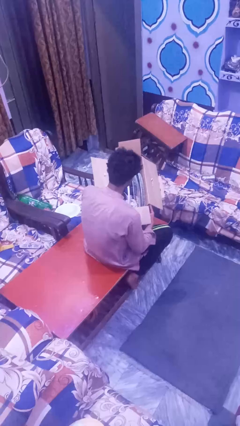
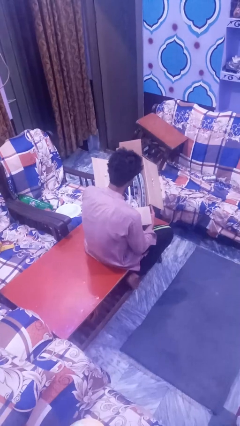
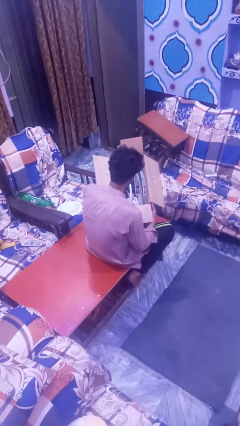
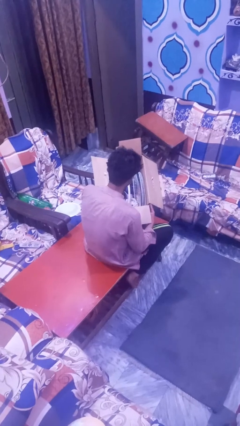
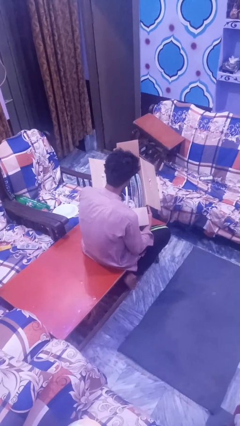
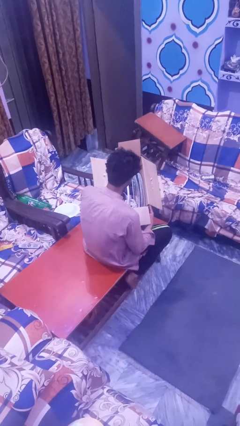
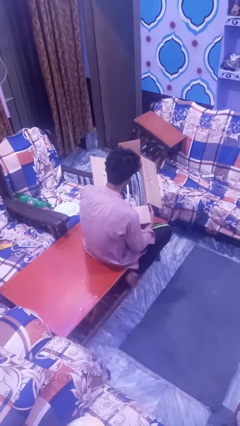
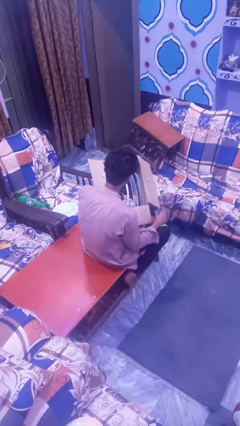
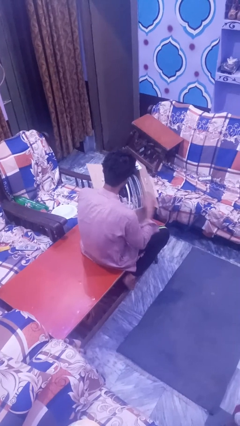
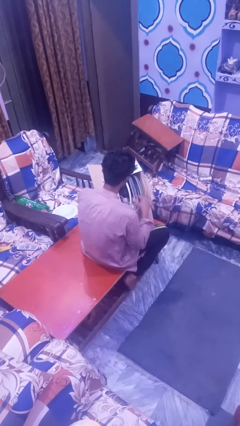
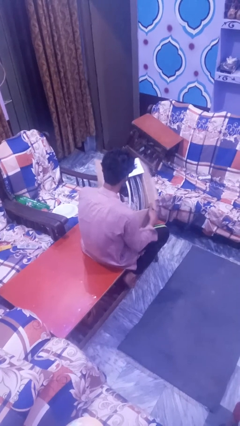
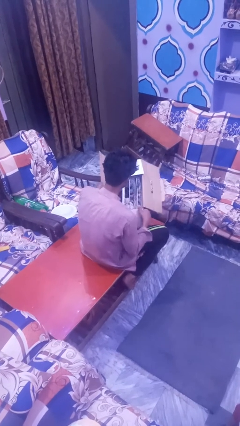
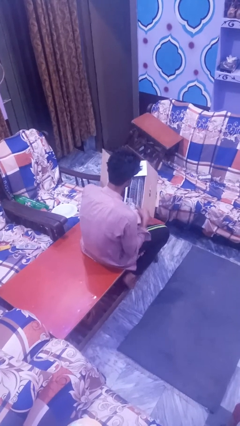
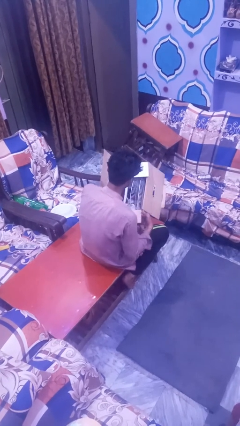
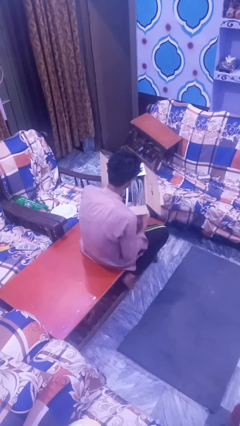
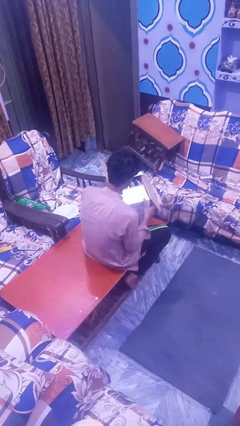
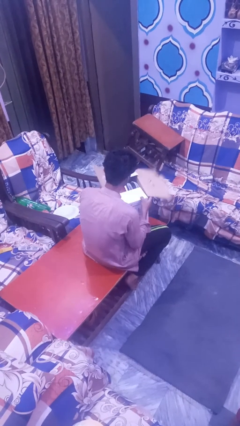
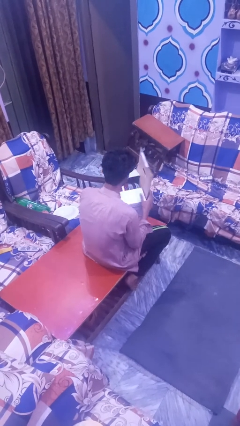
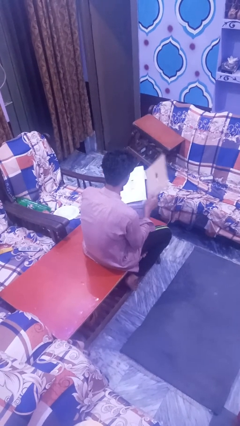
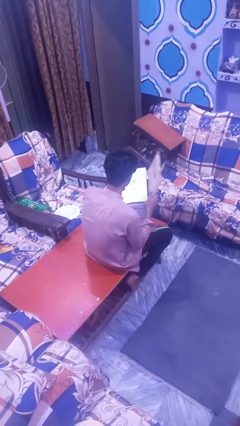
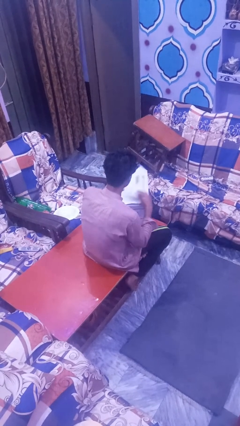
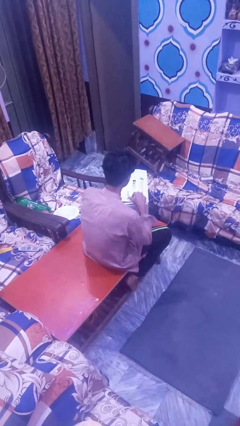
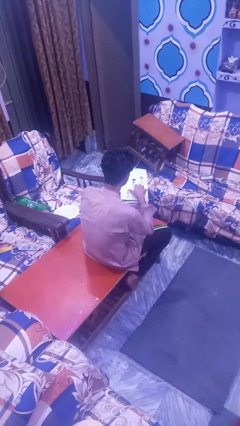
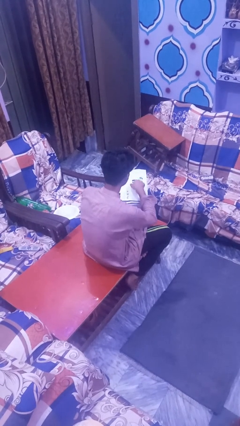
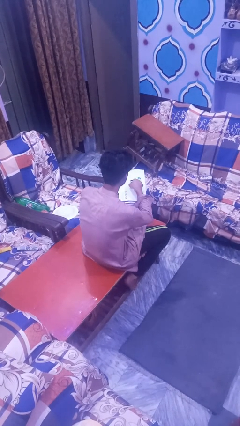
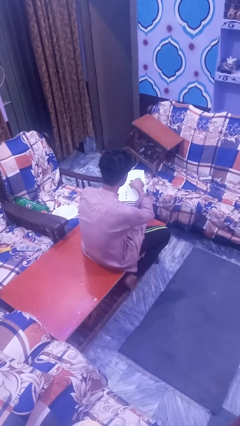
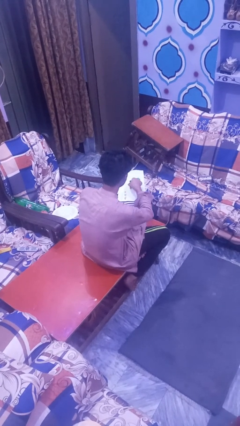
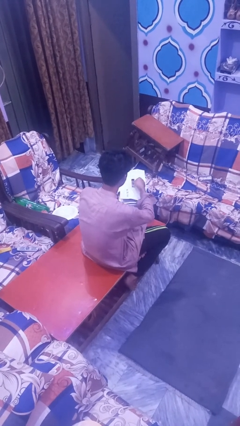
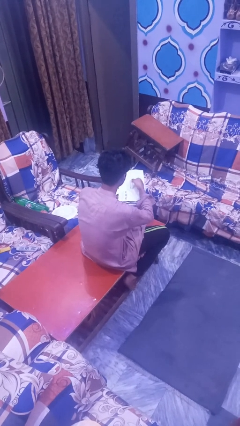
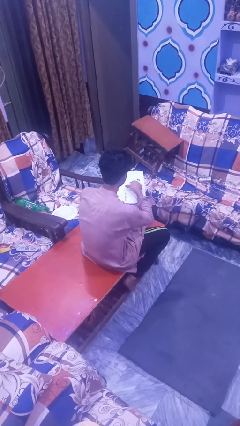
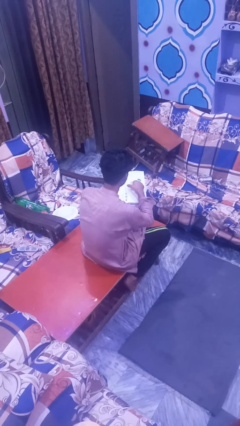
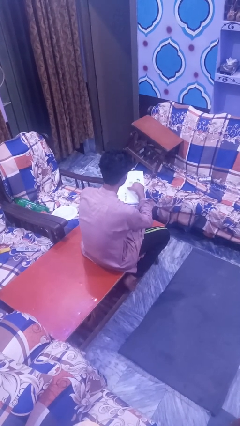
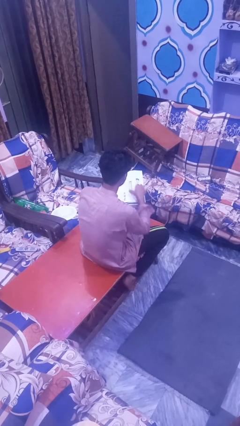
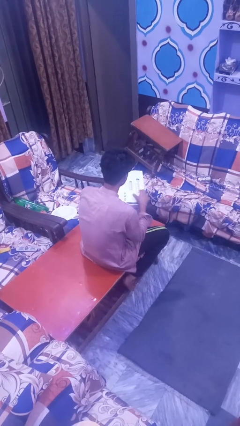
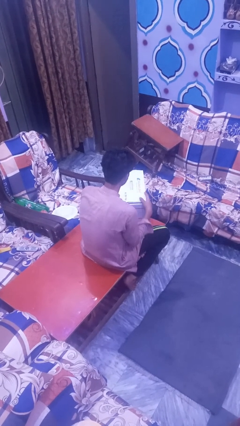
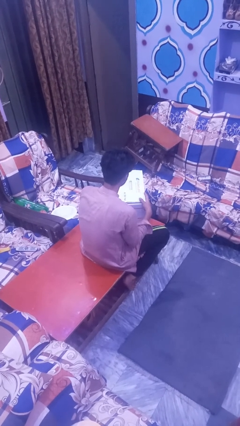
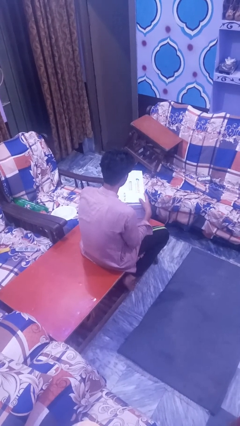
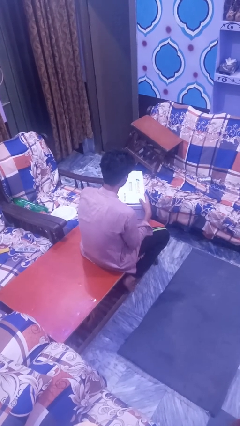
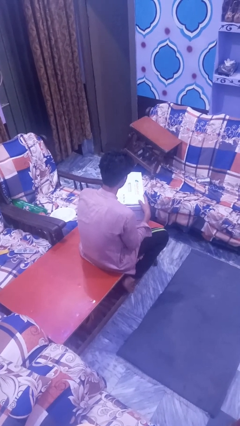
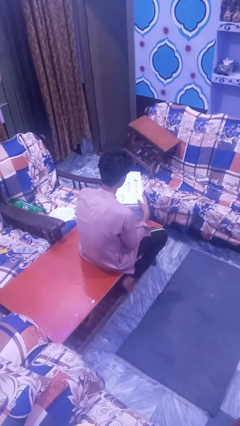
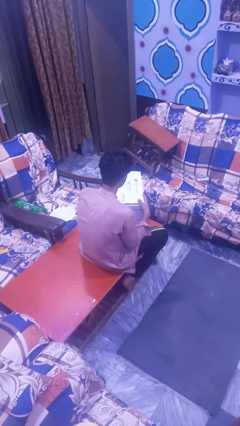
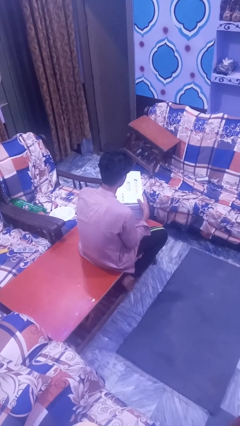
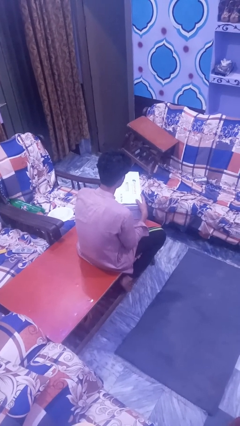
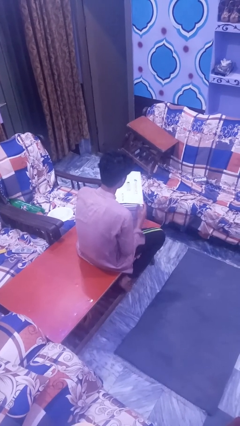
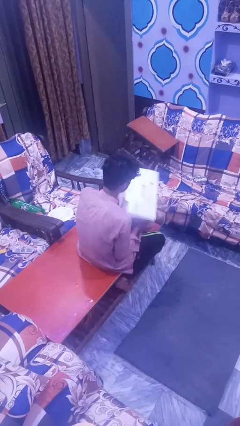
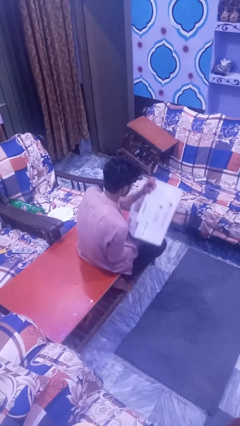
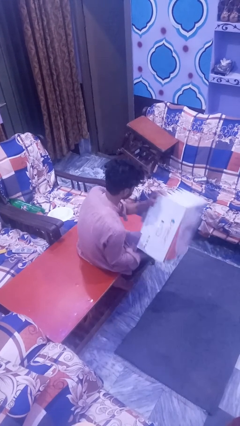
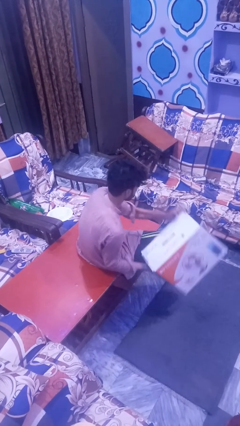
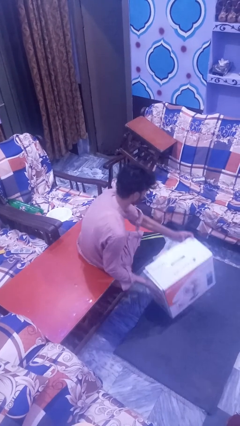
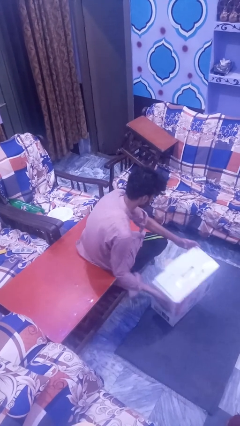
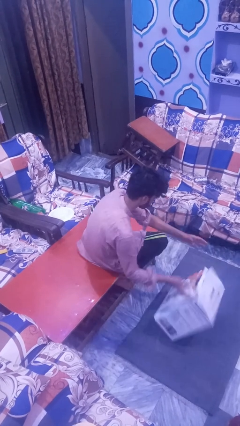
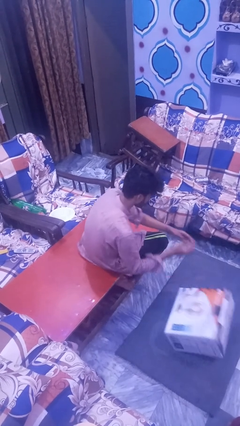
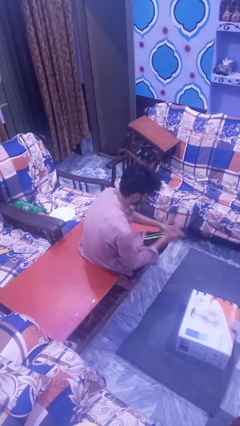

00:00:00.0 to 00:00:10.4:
person unloads box onto floor

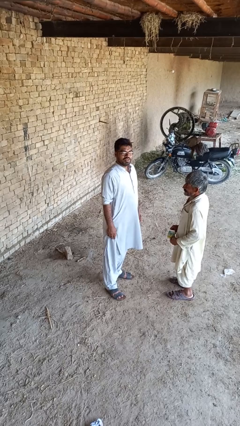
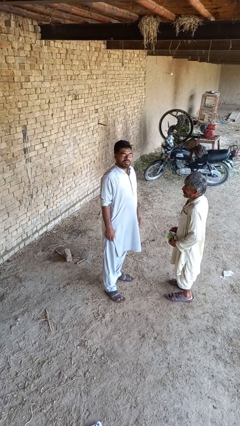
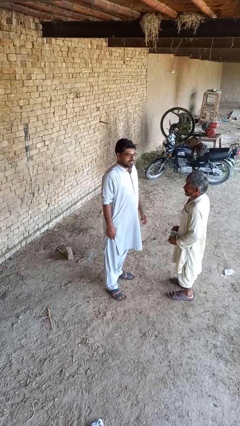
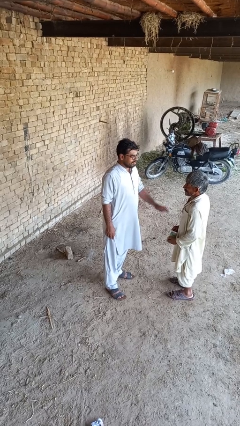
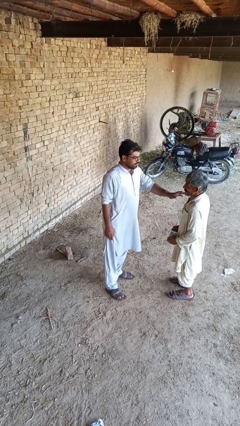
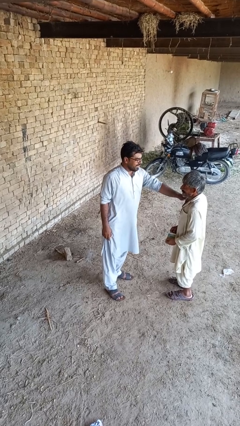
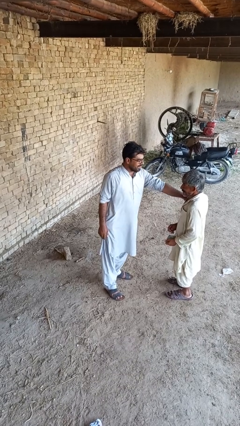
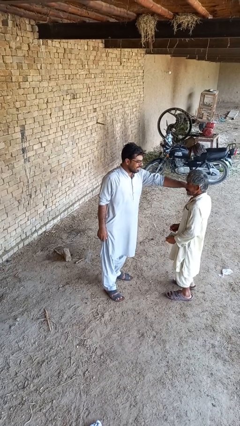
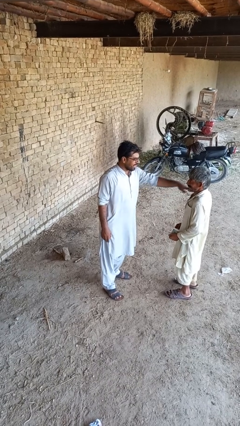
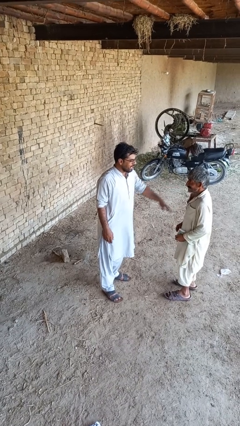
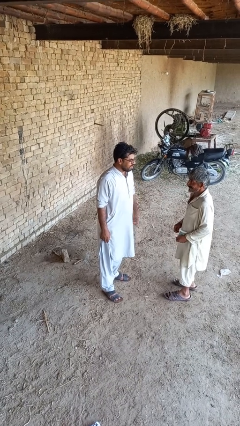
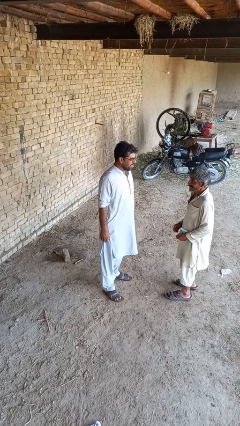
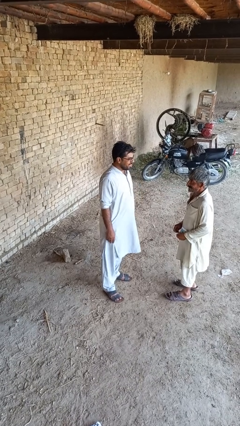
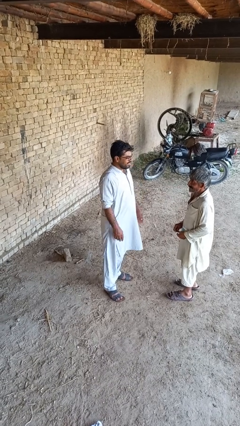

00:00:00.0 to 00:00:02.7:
person shoves person

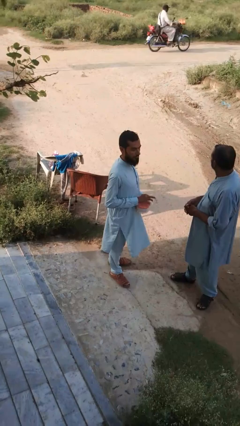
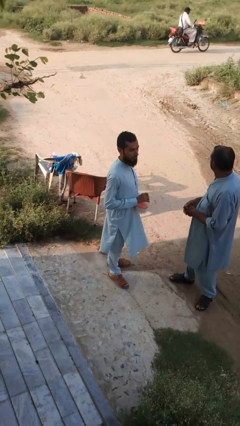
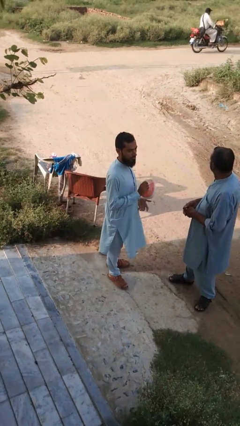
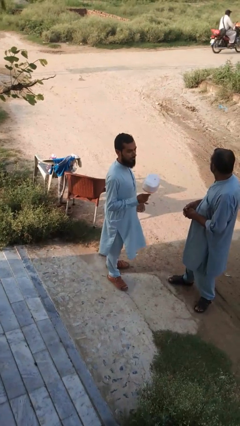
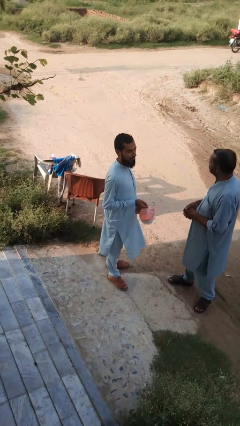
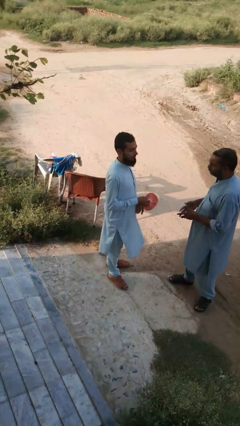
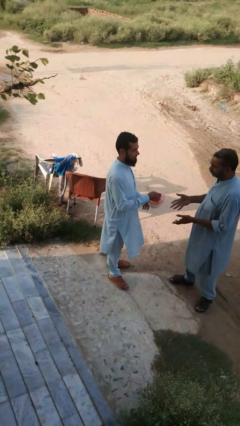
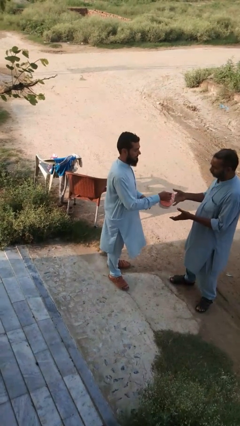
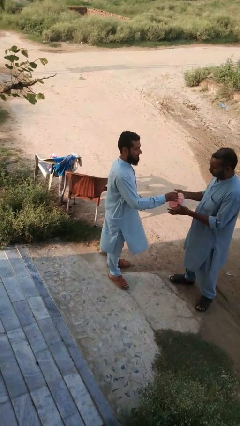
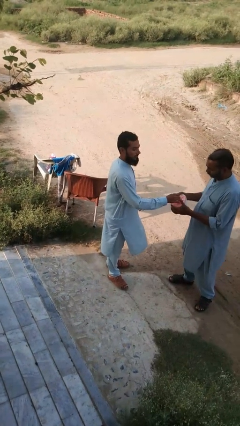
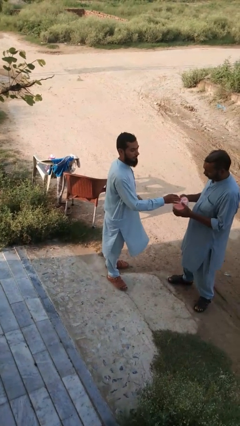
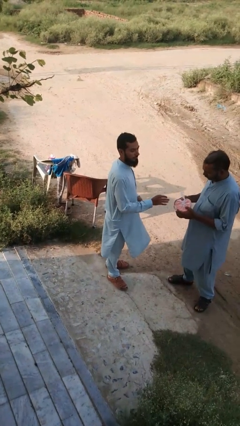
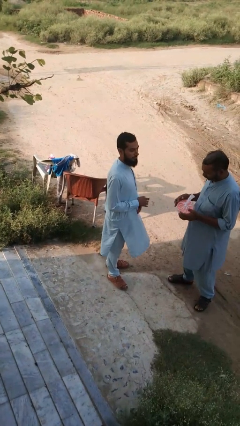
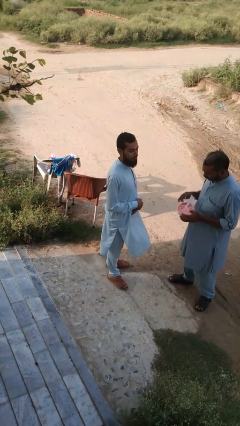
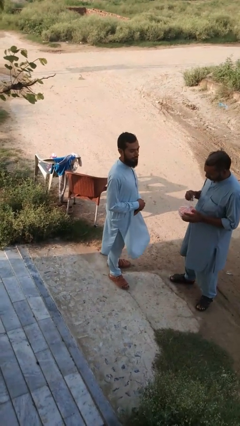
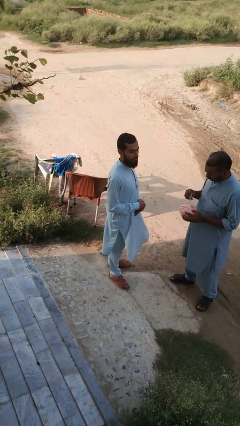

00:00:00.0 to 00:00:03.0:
person transfers object to person

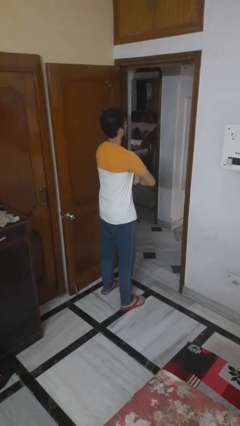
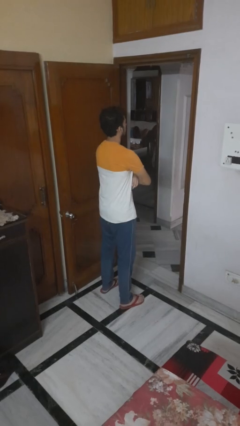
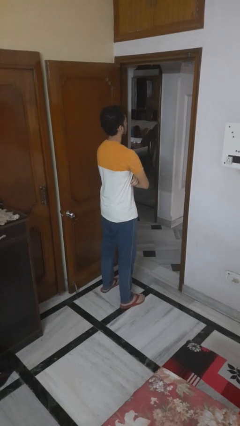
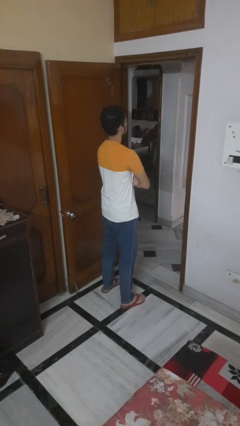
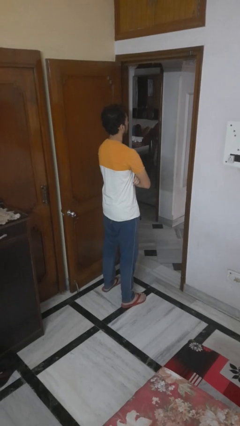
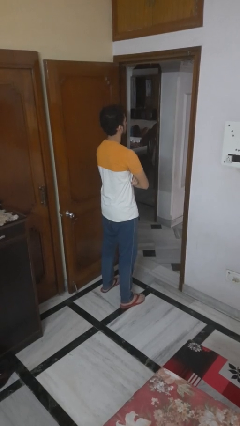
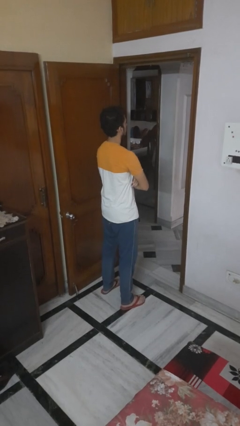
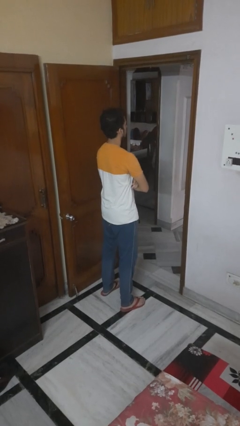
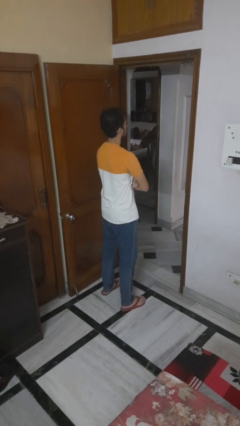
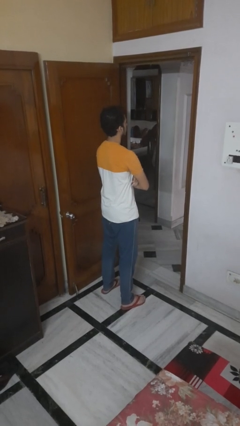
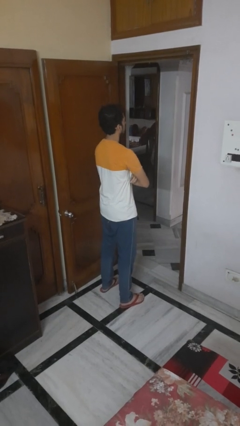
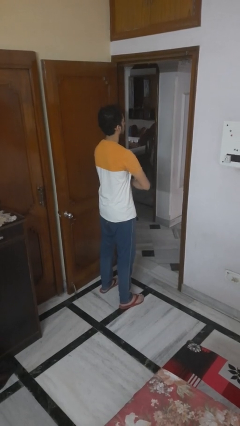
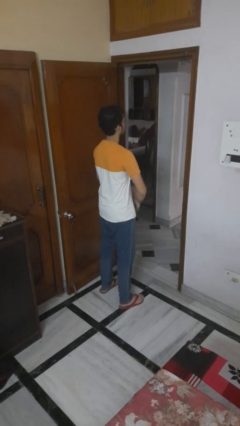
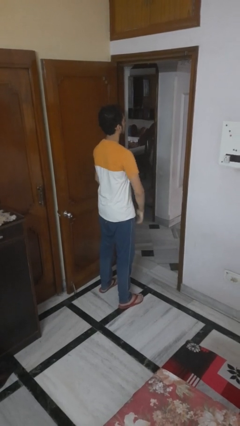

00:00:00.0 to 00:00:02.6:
person crosses arms
